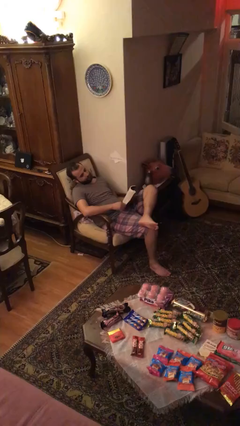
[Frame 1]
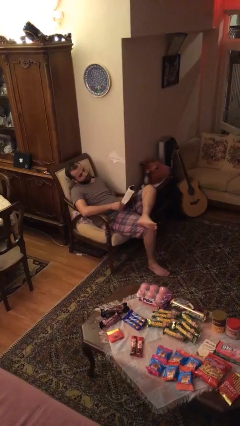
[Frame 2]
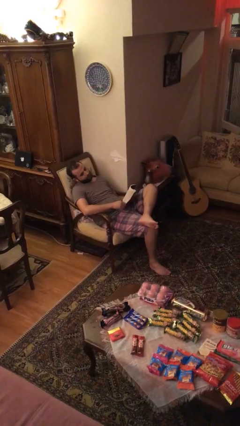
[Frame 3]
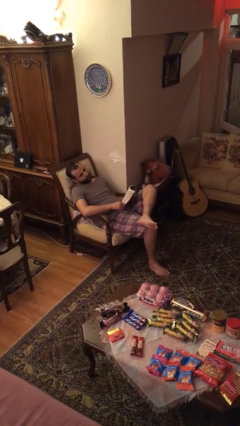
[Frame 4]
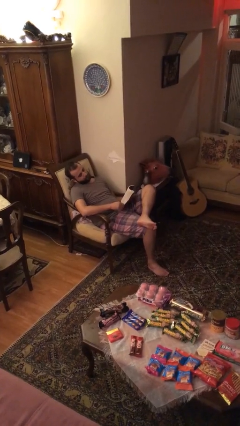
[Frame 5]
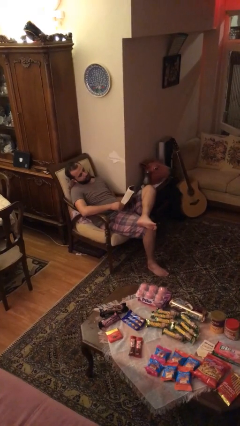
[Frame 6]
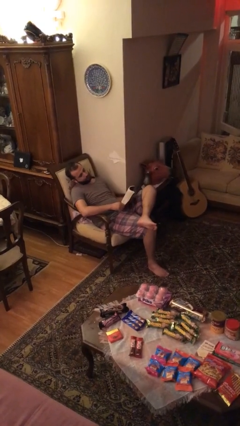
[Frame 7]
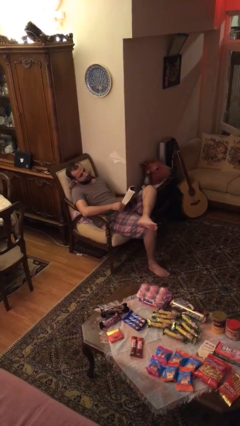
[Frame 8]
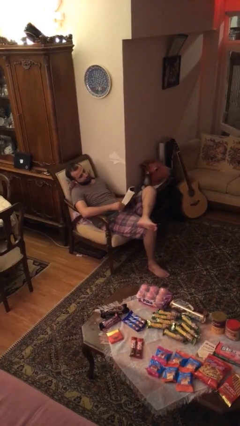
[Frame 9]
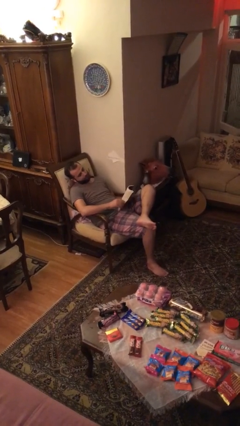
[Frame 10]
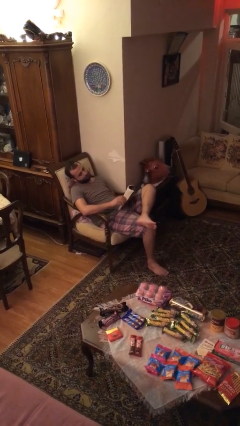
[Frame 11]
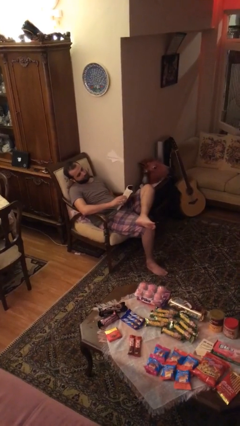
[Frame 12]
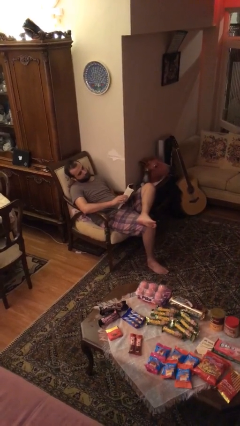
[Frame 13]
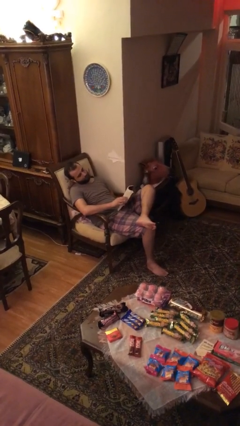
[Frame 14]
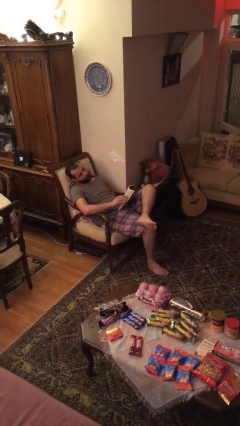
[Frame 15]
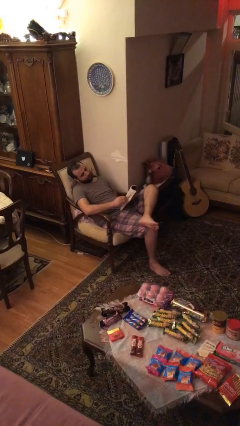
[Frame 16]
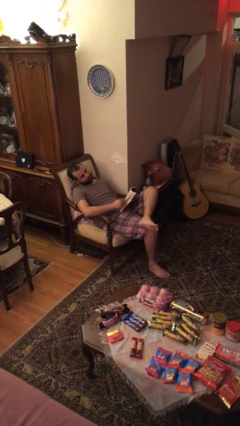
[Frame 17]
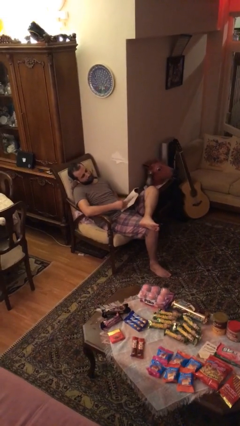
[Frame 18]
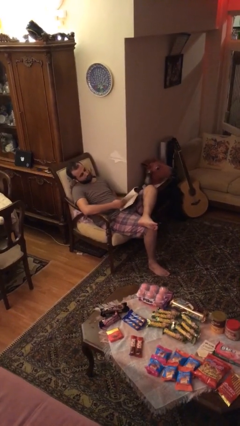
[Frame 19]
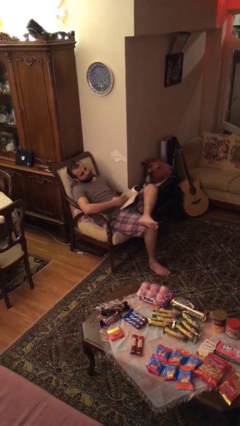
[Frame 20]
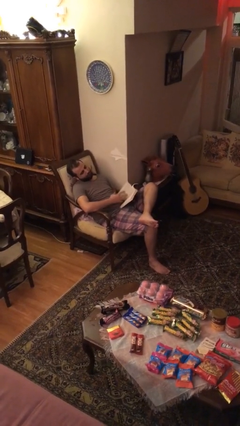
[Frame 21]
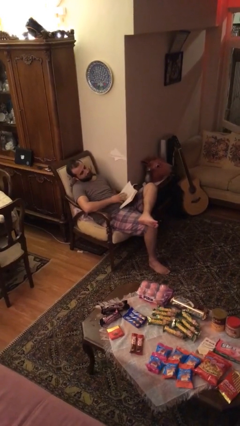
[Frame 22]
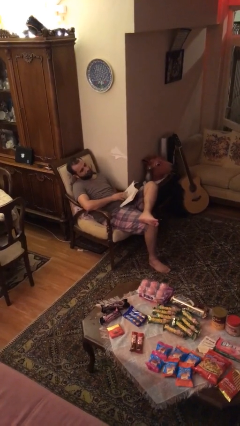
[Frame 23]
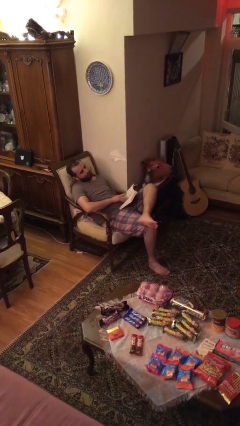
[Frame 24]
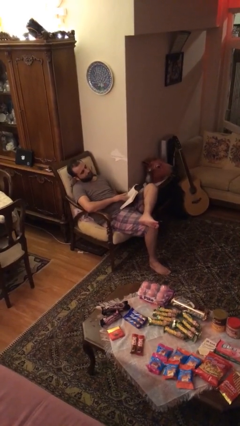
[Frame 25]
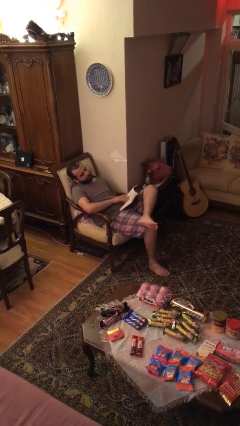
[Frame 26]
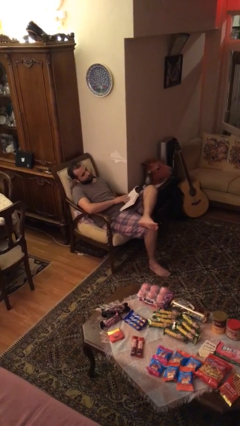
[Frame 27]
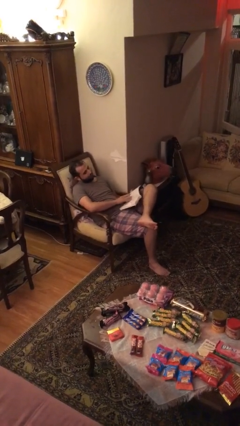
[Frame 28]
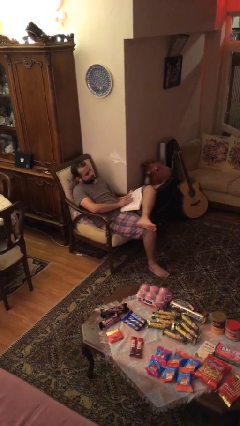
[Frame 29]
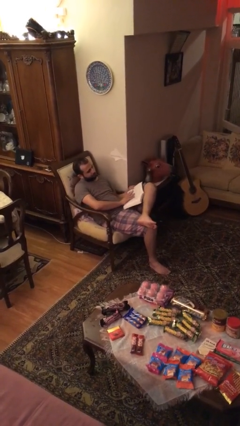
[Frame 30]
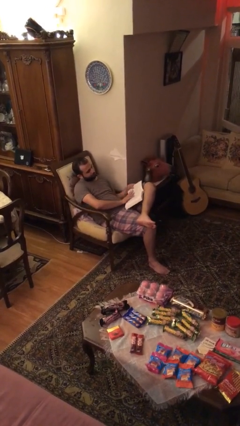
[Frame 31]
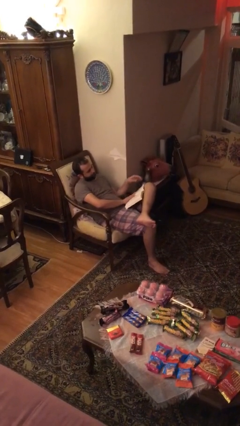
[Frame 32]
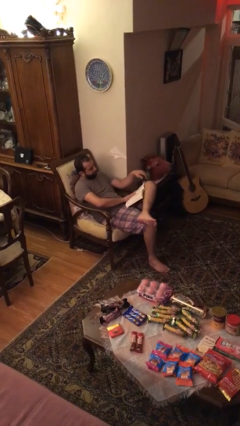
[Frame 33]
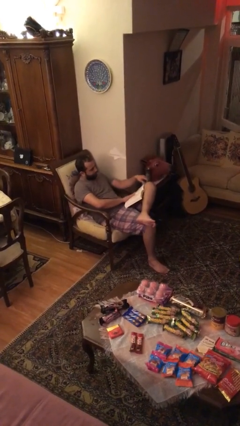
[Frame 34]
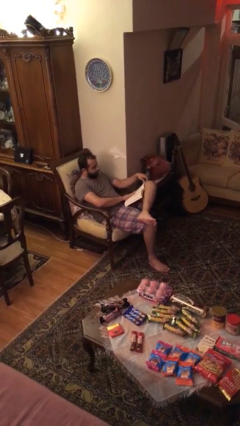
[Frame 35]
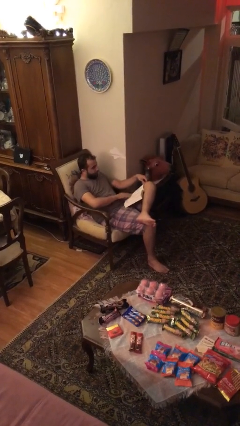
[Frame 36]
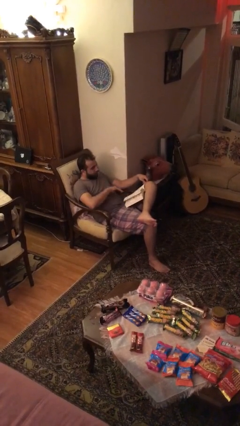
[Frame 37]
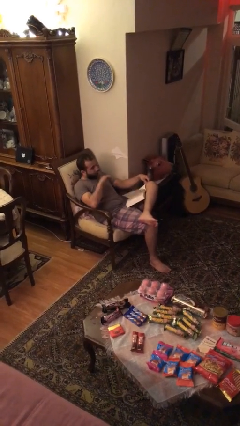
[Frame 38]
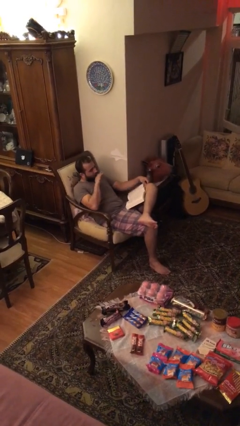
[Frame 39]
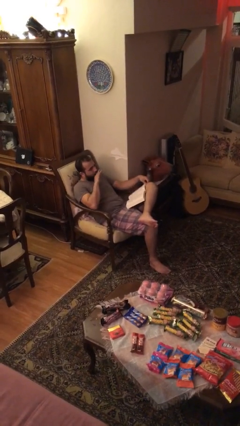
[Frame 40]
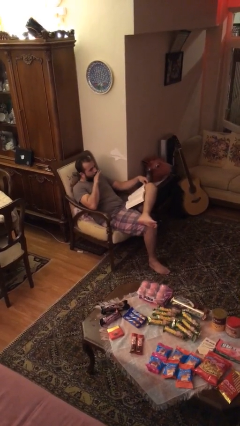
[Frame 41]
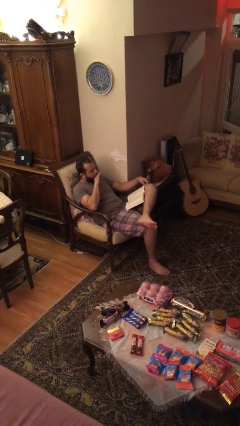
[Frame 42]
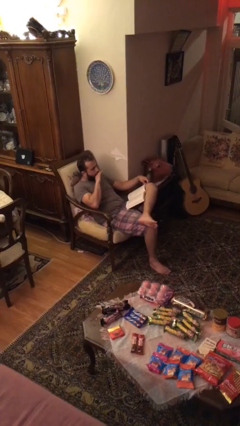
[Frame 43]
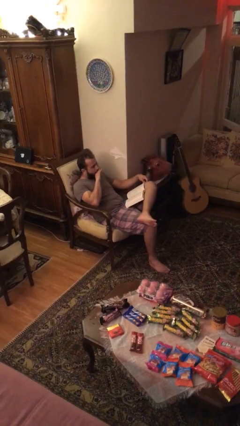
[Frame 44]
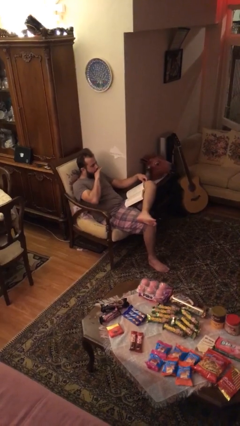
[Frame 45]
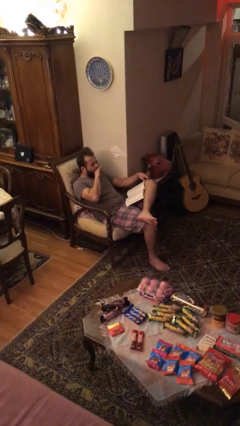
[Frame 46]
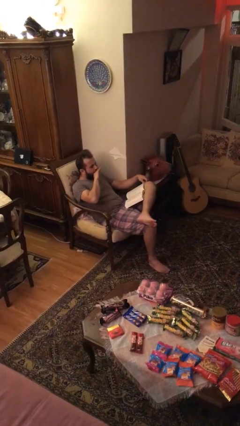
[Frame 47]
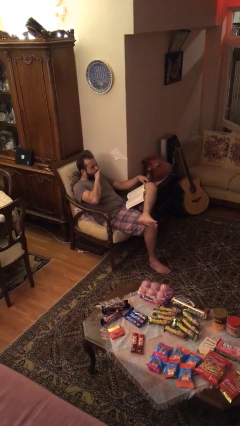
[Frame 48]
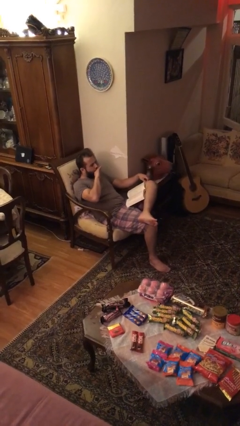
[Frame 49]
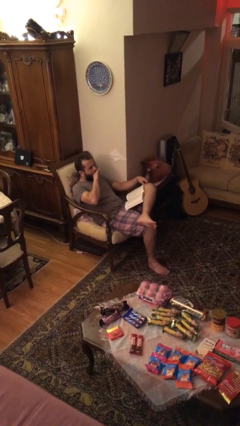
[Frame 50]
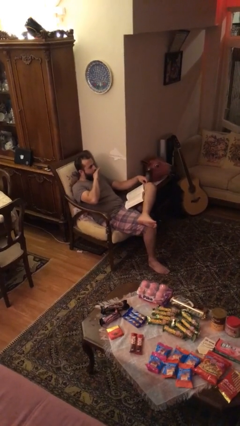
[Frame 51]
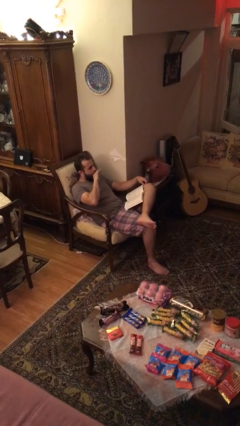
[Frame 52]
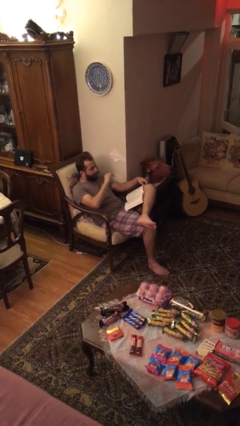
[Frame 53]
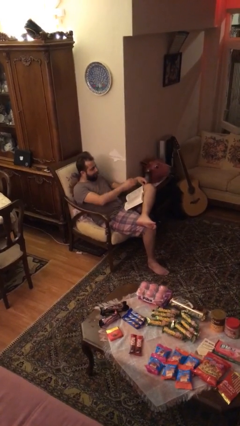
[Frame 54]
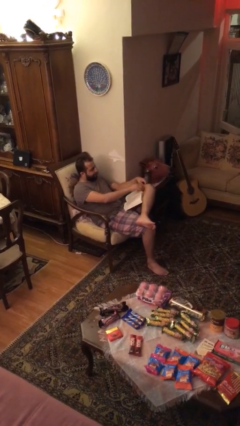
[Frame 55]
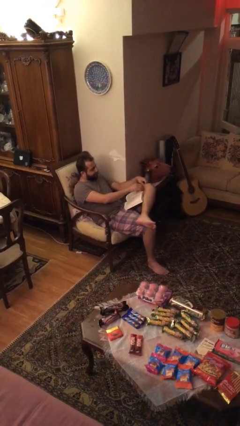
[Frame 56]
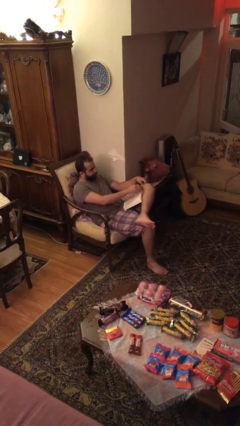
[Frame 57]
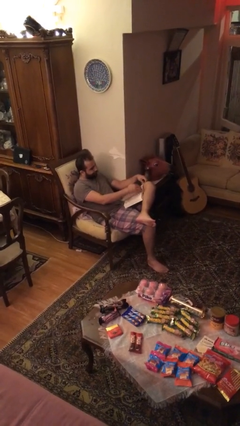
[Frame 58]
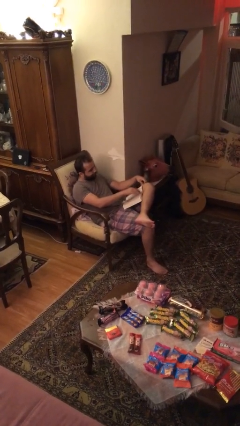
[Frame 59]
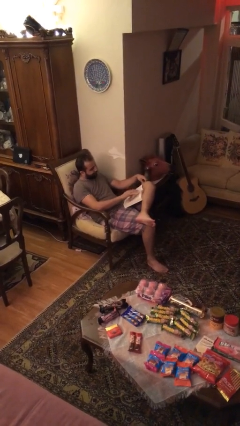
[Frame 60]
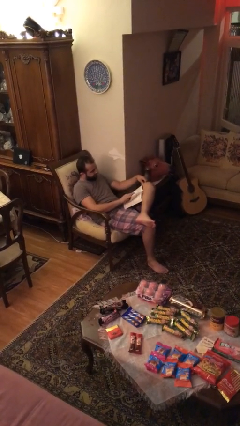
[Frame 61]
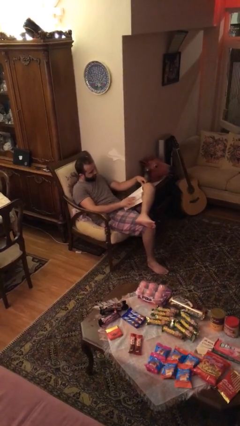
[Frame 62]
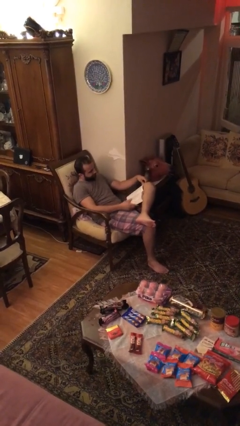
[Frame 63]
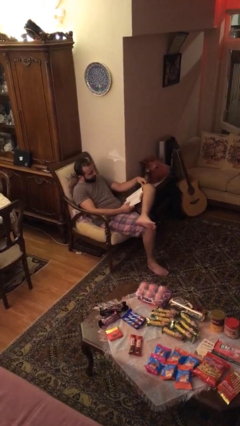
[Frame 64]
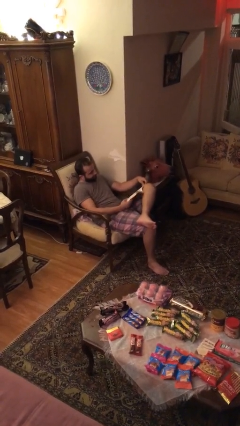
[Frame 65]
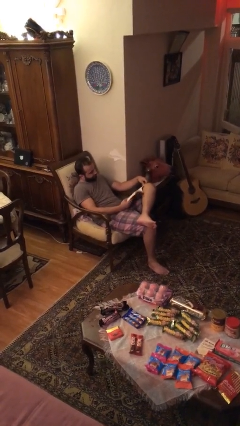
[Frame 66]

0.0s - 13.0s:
person reads document

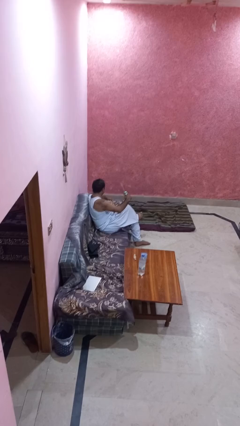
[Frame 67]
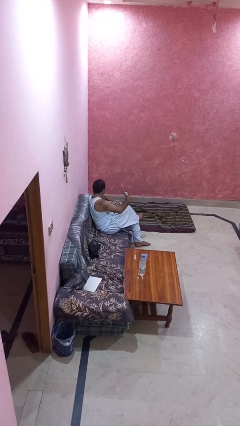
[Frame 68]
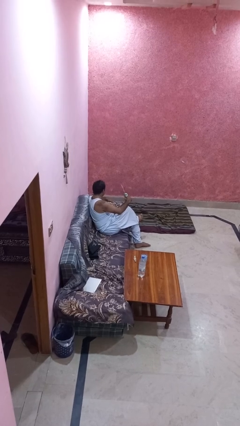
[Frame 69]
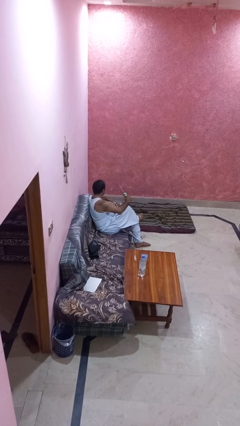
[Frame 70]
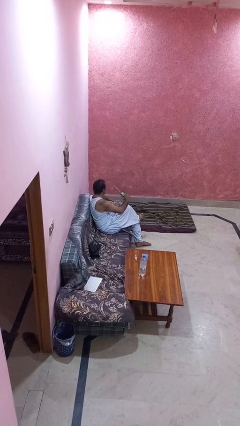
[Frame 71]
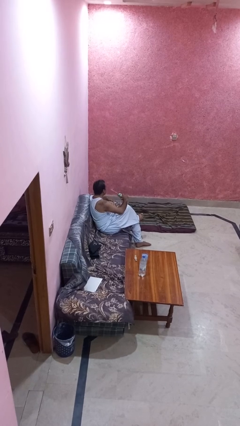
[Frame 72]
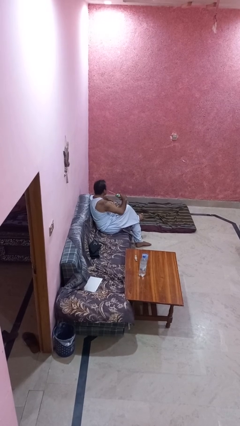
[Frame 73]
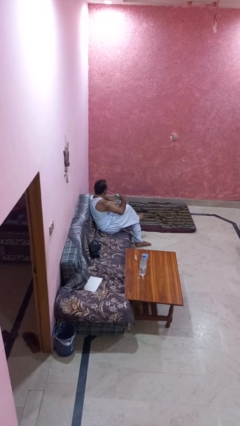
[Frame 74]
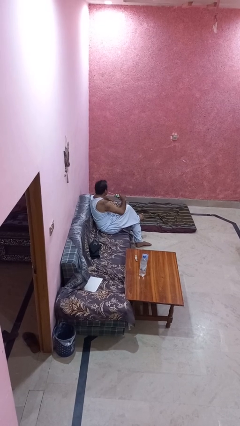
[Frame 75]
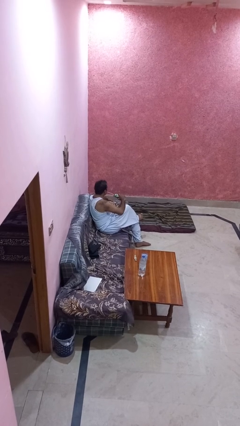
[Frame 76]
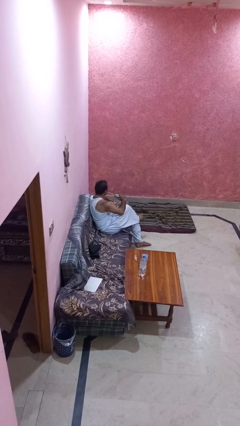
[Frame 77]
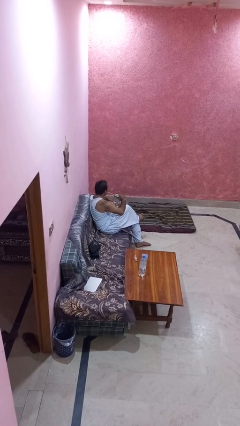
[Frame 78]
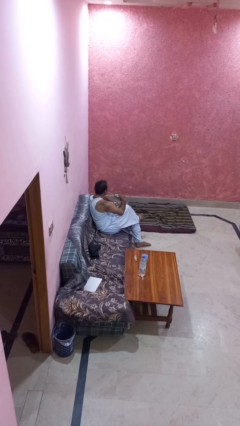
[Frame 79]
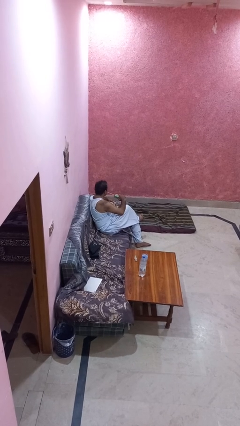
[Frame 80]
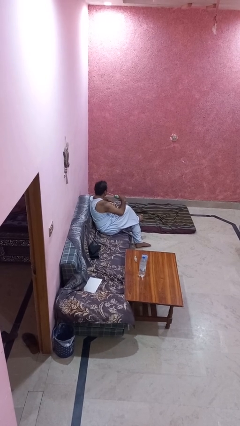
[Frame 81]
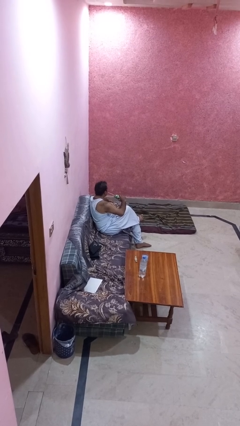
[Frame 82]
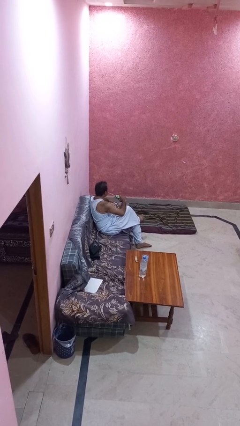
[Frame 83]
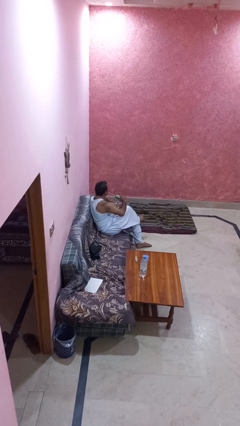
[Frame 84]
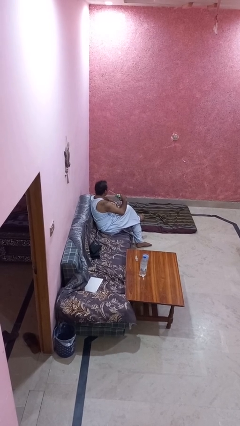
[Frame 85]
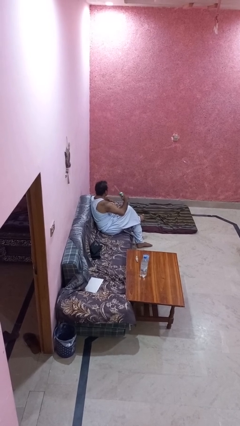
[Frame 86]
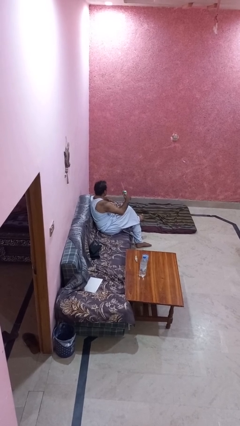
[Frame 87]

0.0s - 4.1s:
person drinks from straw

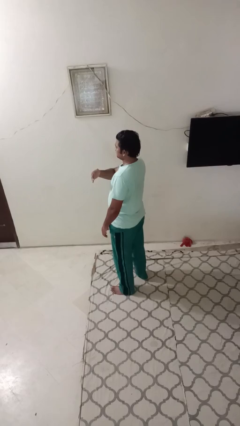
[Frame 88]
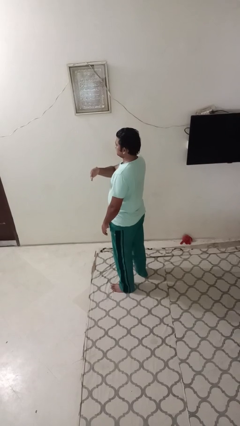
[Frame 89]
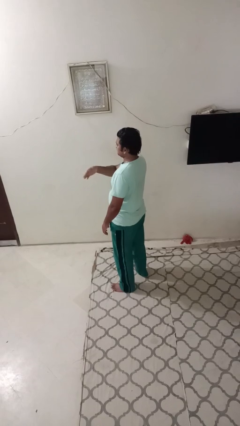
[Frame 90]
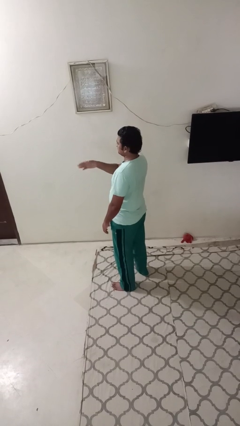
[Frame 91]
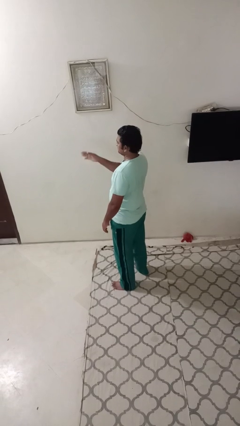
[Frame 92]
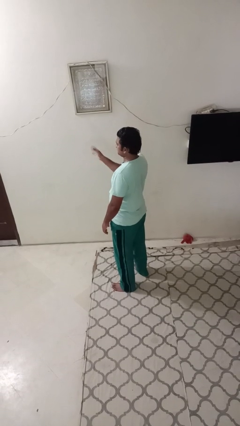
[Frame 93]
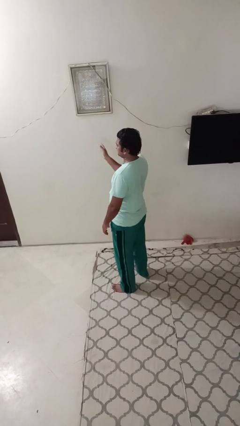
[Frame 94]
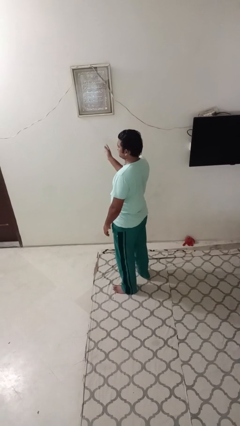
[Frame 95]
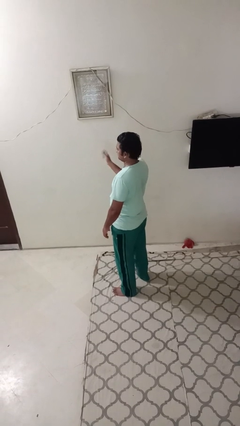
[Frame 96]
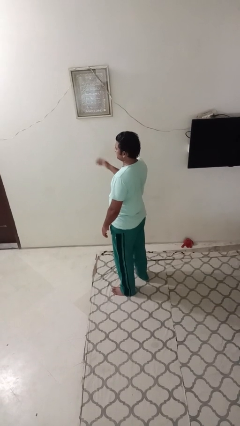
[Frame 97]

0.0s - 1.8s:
person gestures swipe right
